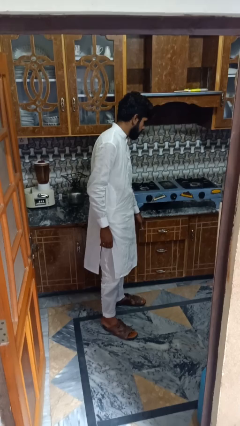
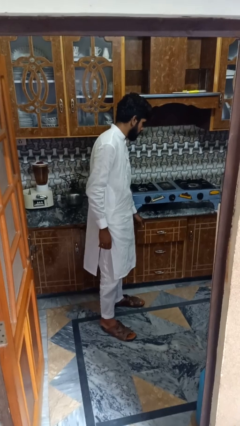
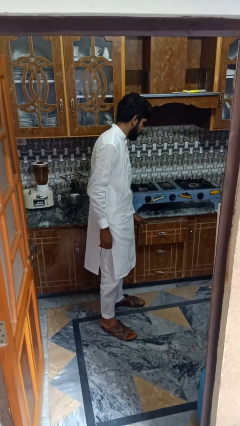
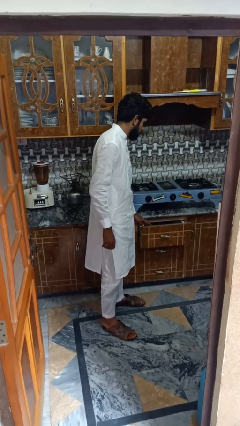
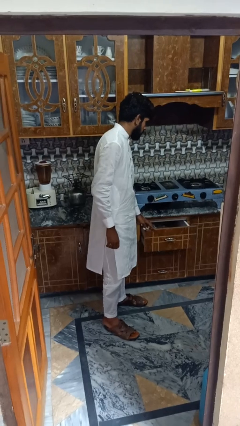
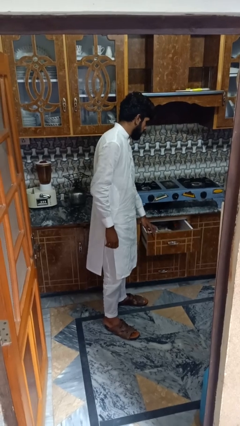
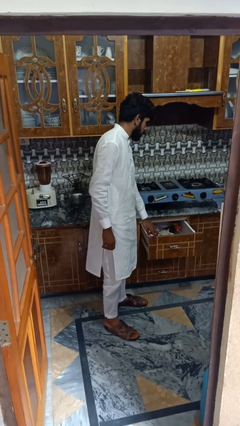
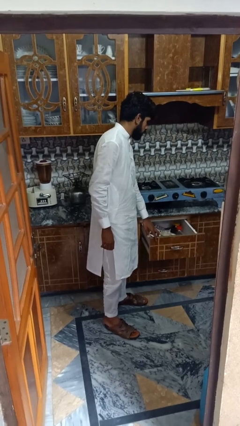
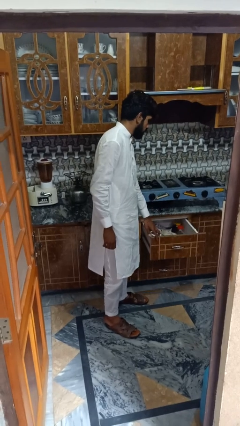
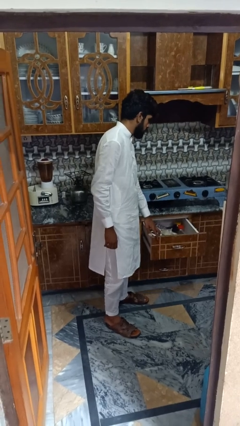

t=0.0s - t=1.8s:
person opens kitchen drawer

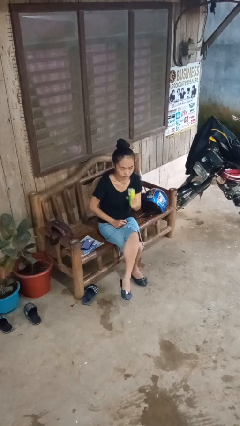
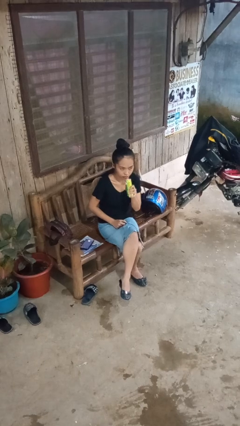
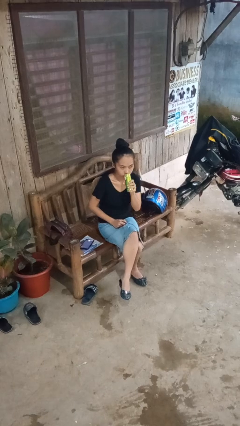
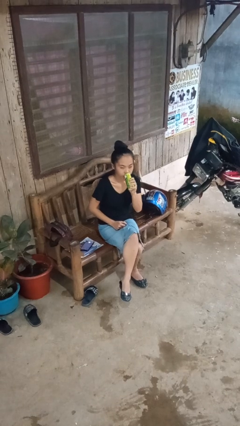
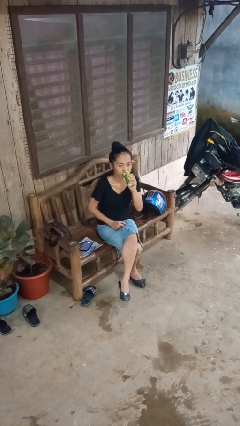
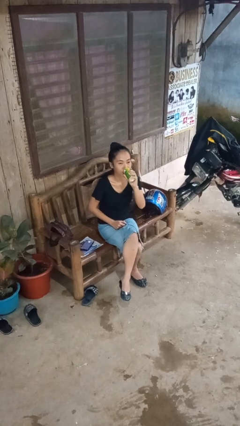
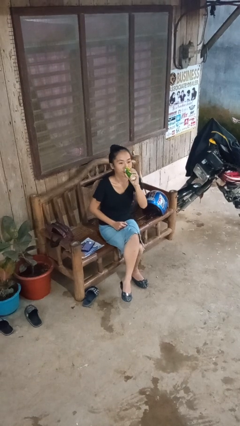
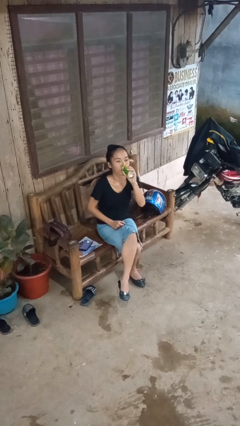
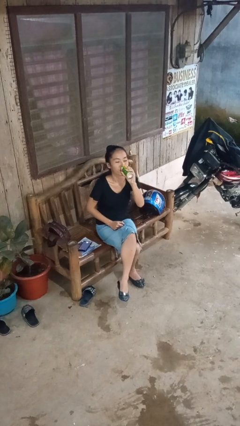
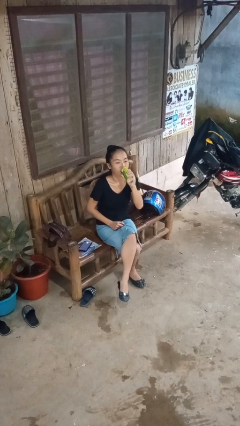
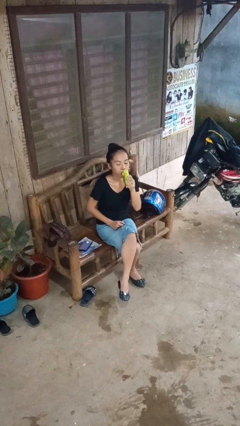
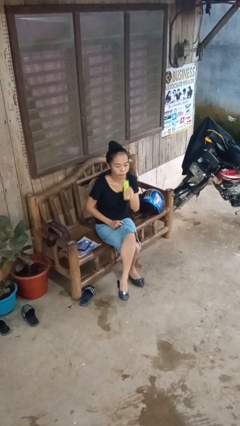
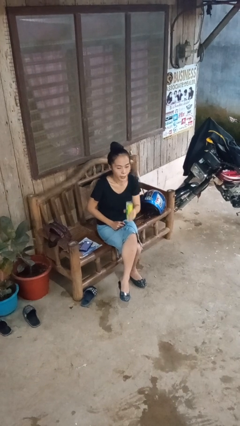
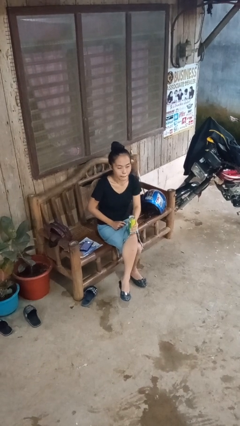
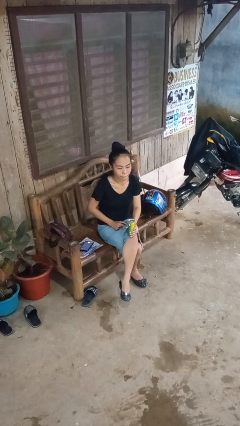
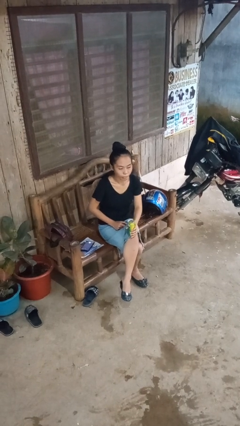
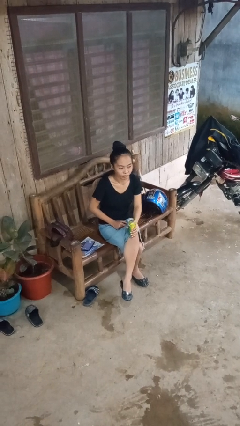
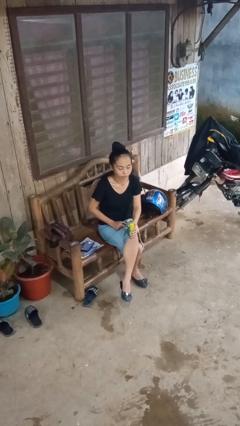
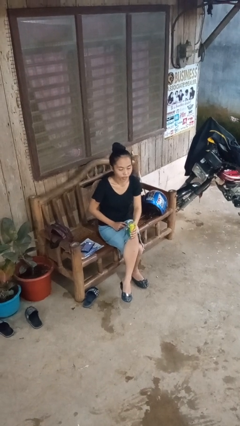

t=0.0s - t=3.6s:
person drinks from beverage can

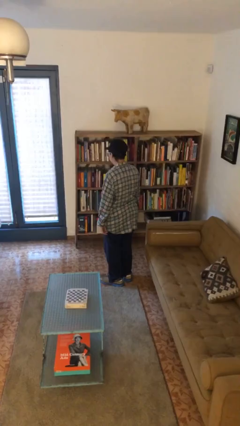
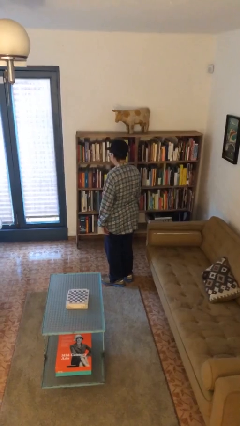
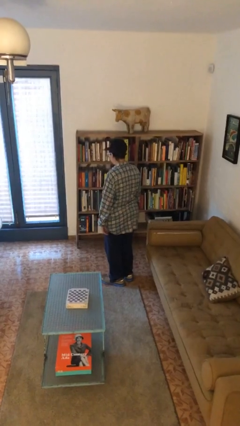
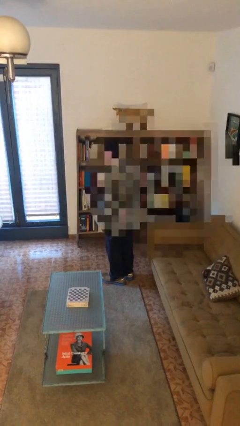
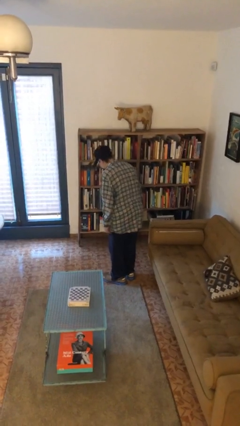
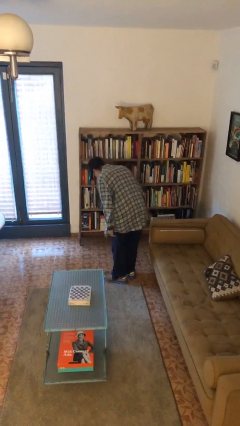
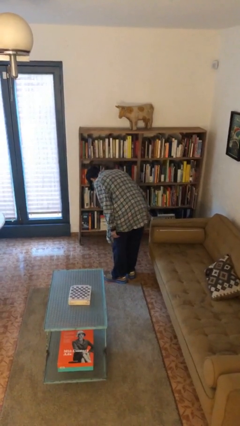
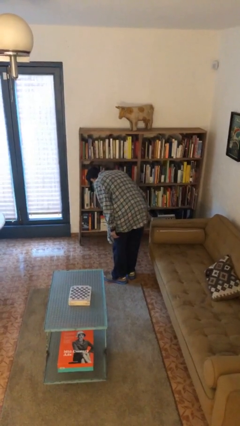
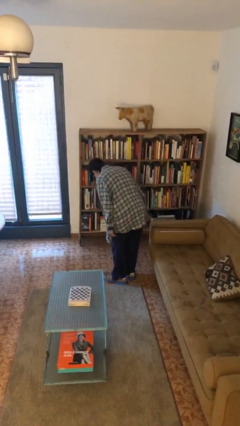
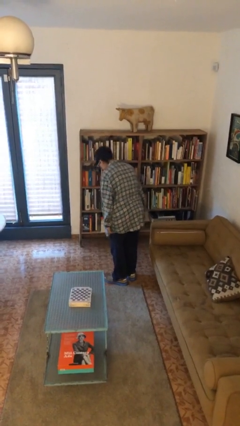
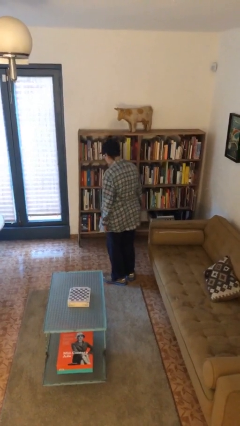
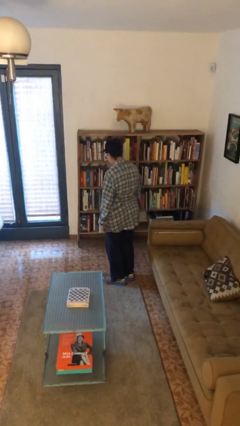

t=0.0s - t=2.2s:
person bows

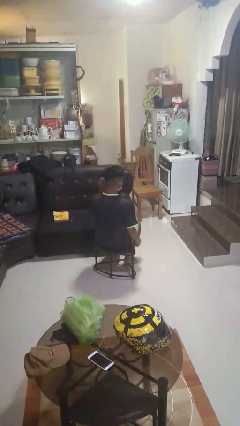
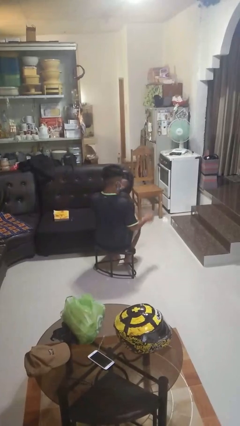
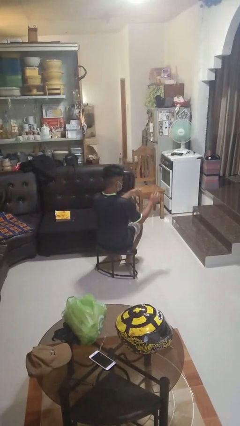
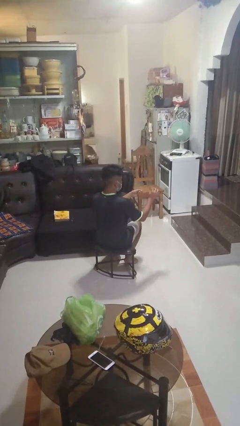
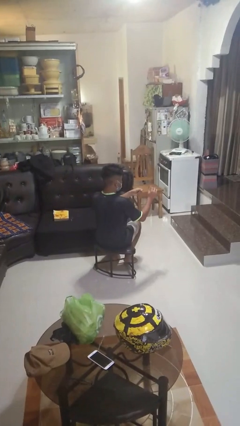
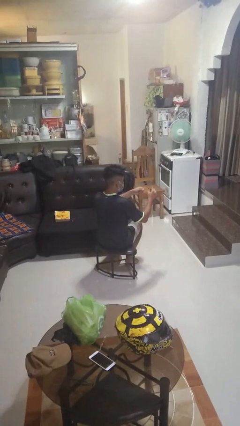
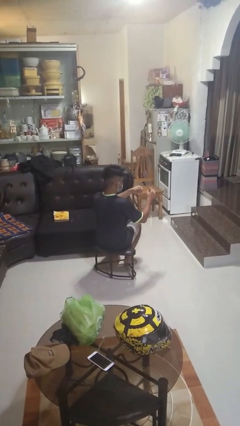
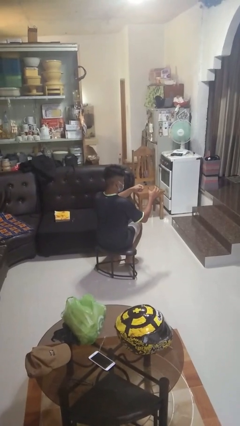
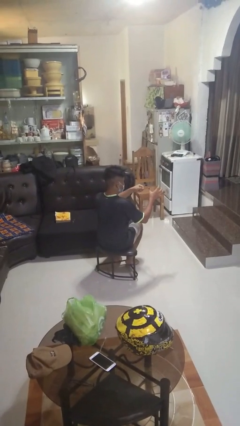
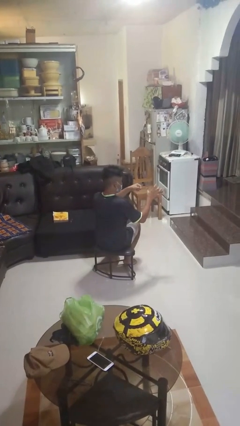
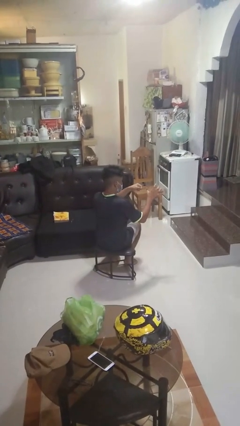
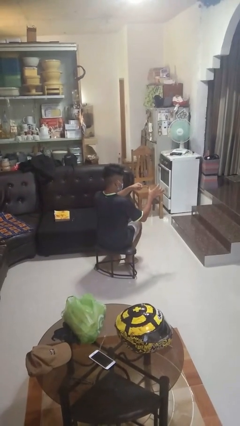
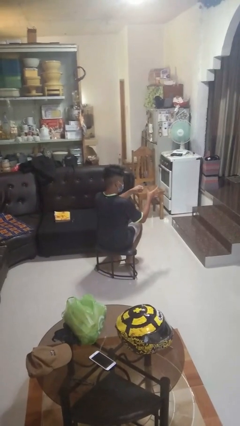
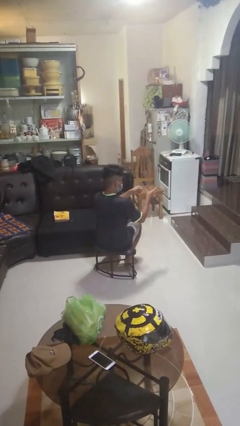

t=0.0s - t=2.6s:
person files fingernails

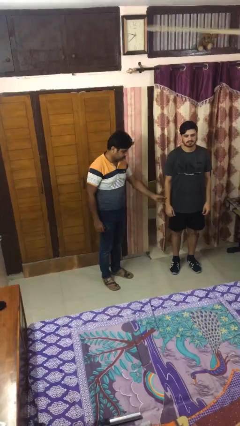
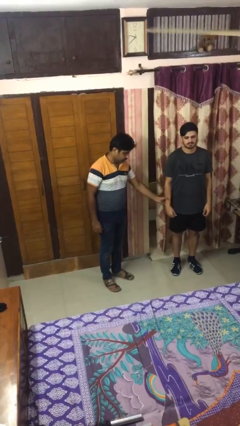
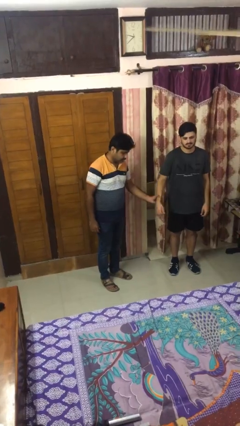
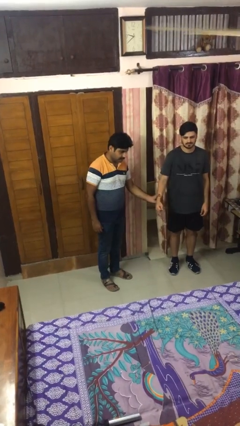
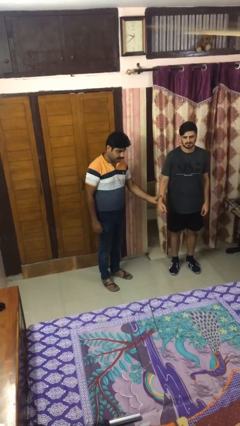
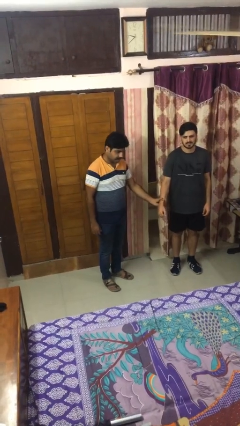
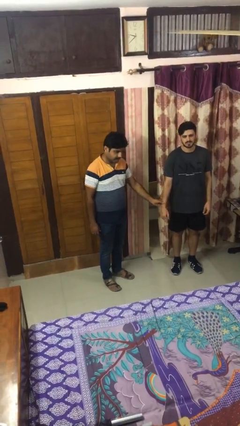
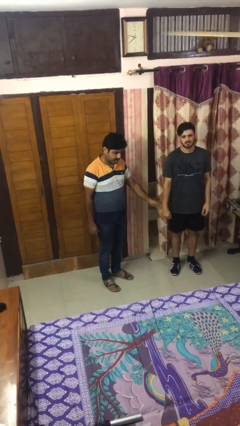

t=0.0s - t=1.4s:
person grabs person by forearm

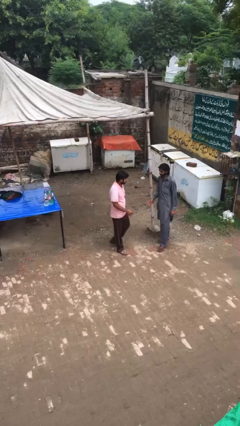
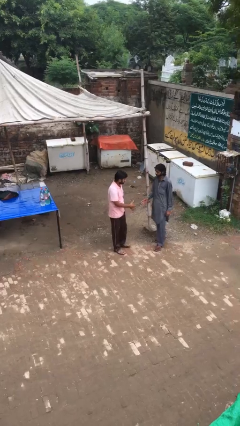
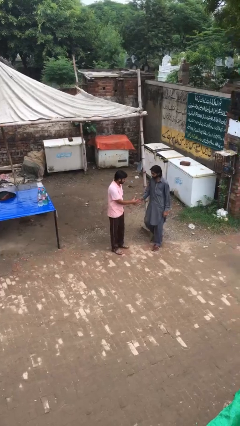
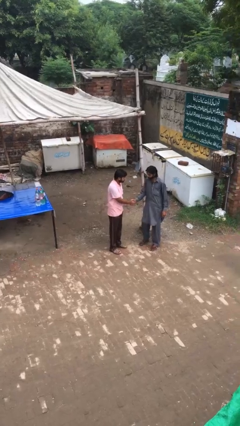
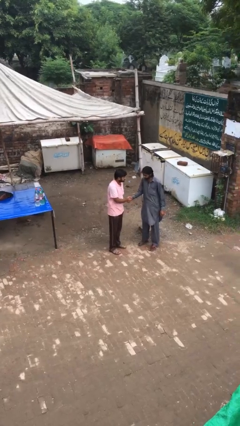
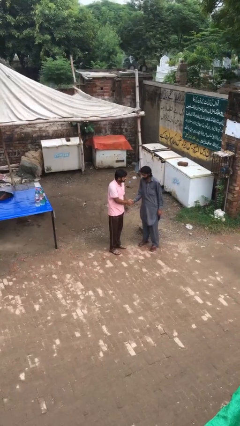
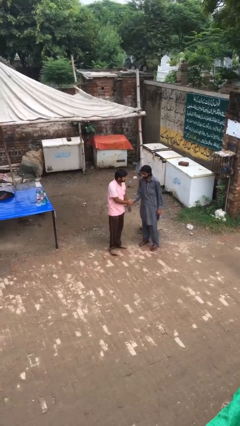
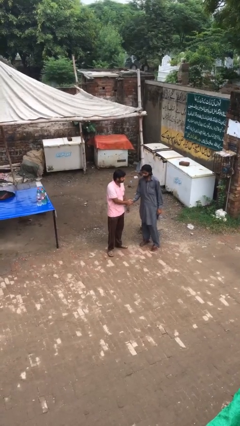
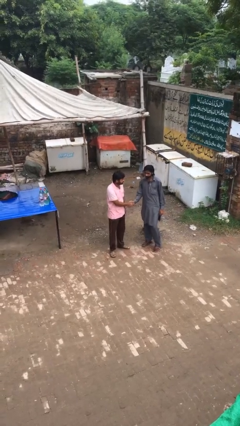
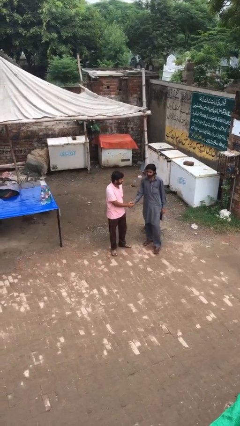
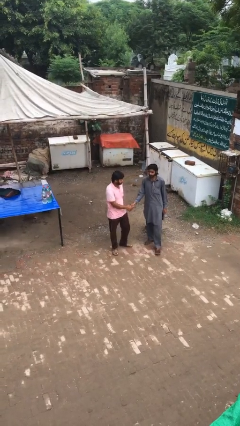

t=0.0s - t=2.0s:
person shakes hand

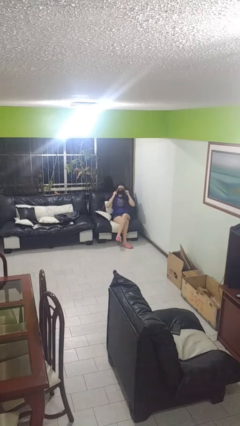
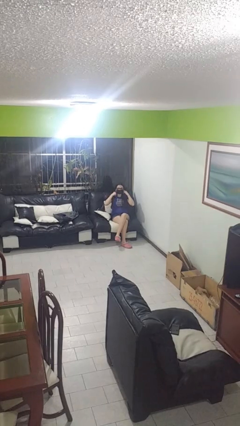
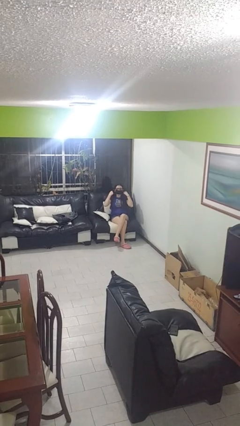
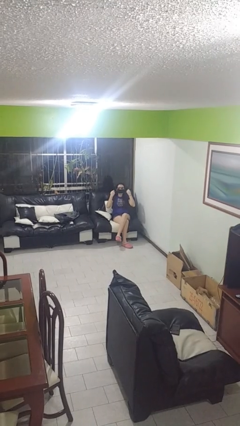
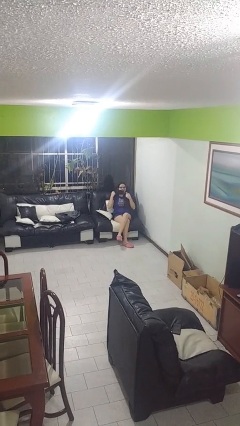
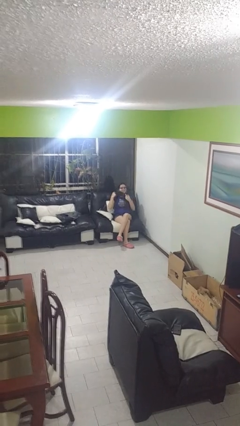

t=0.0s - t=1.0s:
person takes off facemask

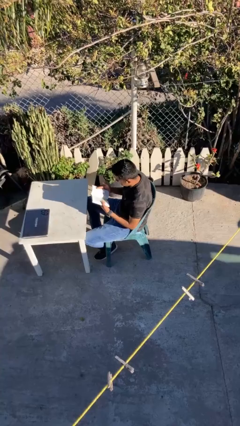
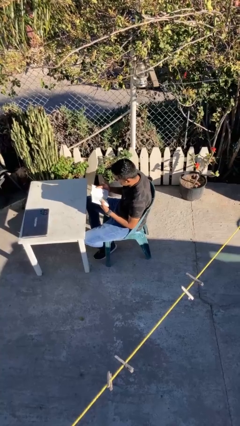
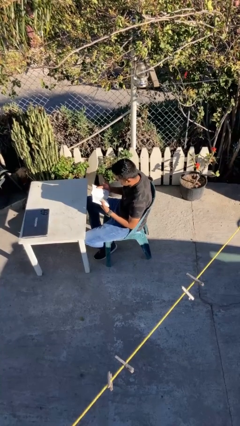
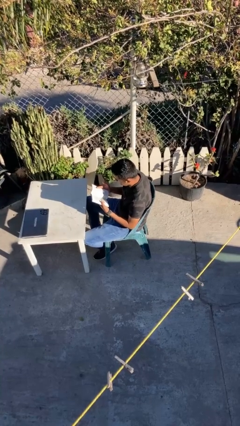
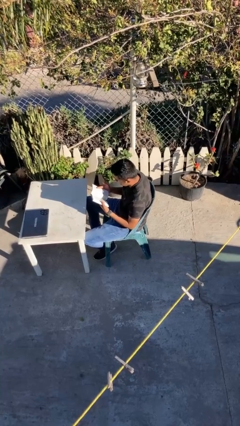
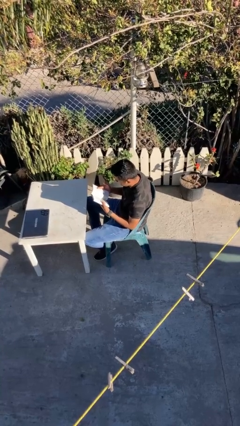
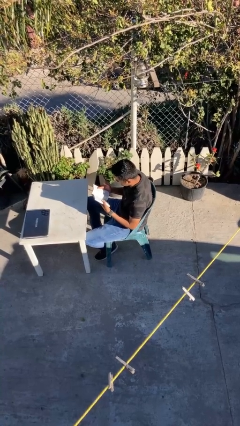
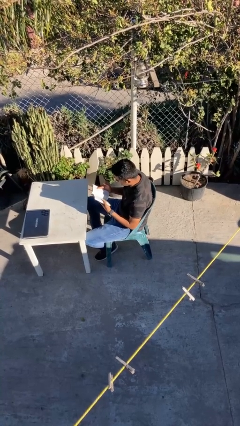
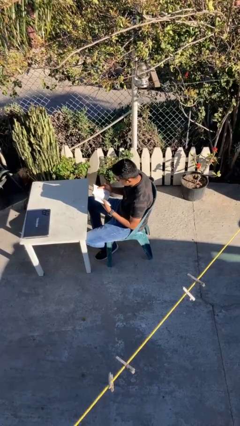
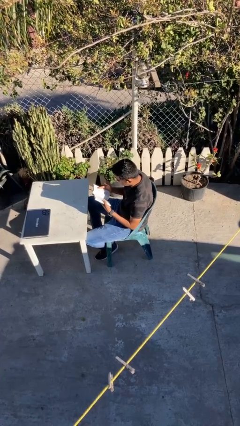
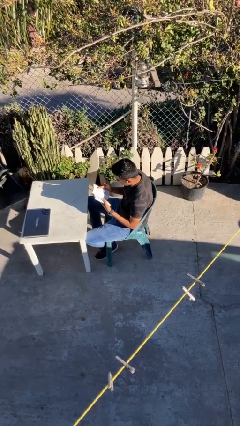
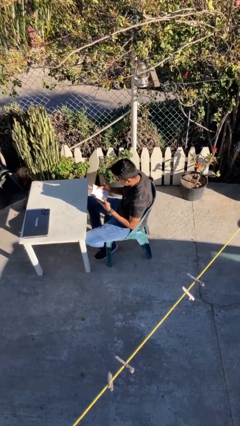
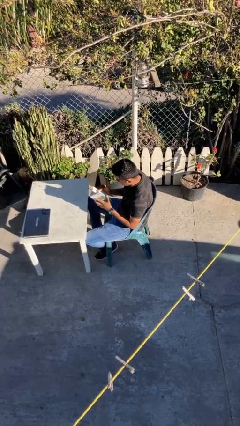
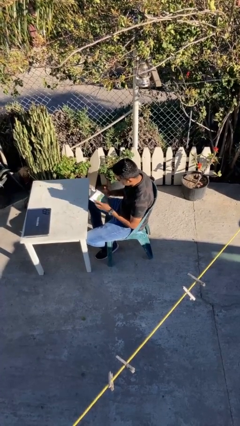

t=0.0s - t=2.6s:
person reads document
